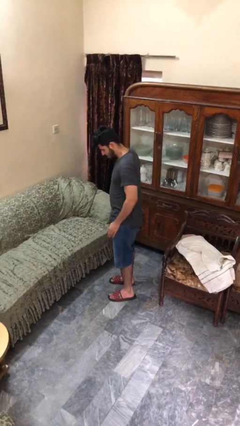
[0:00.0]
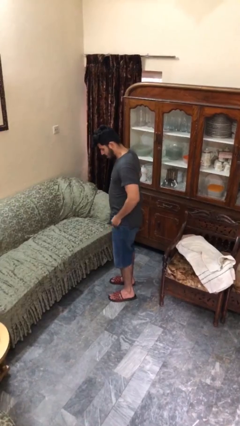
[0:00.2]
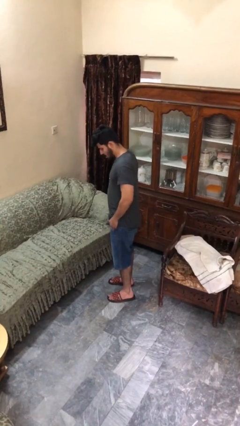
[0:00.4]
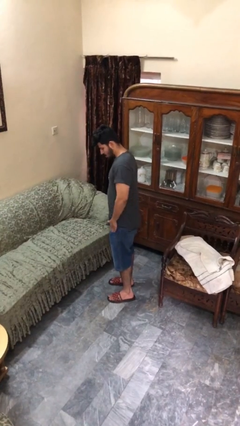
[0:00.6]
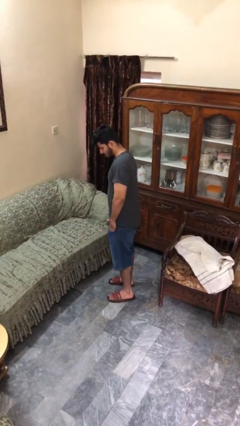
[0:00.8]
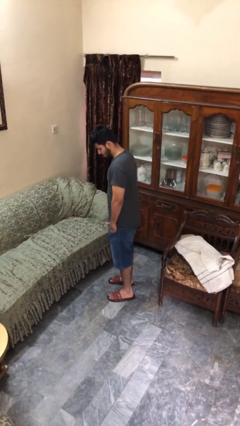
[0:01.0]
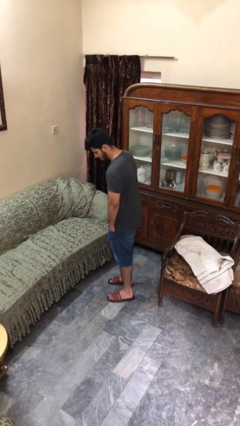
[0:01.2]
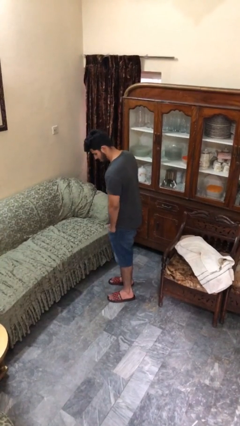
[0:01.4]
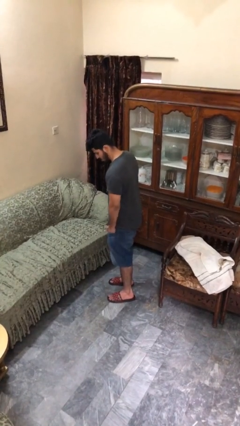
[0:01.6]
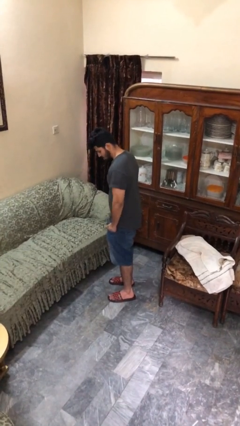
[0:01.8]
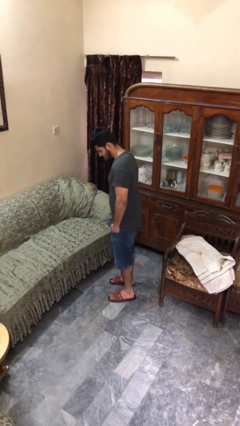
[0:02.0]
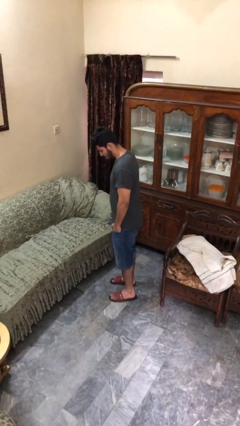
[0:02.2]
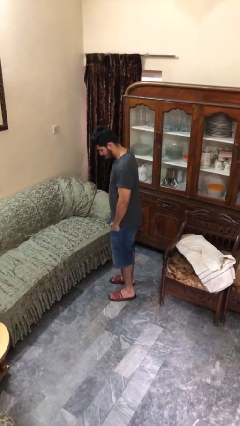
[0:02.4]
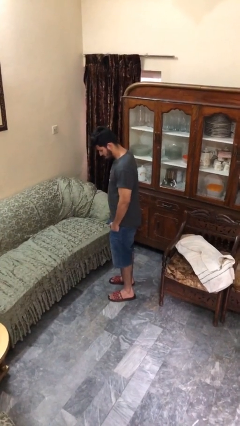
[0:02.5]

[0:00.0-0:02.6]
person puts hands in back pockets

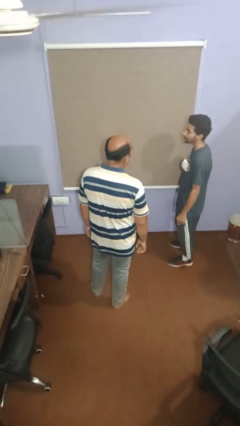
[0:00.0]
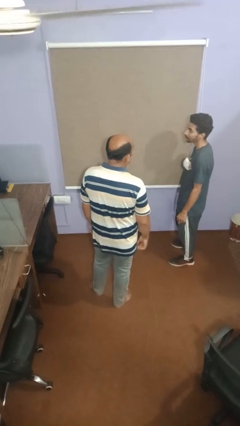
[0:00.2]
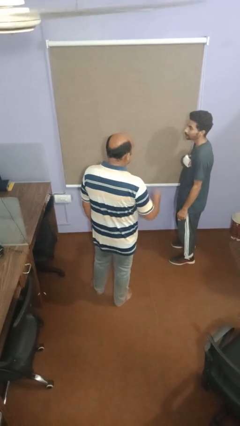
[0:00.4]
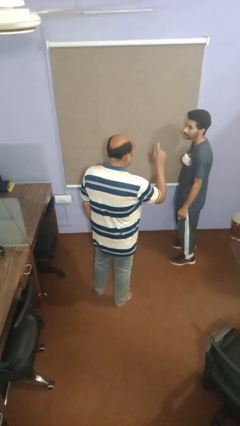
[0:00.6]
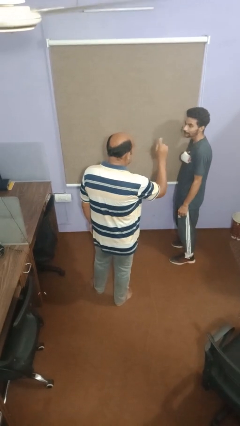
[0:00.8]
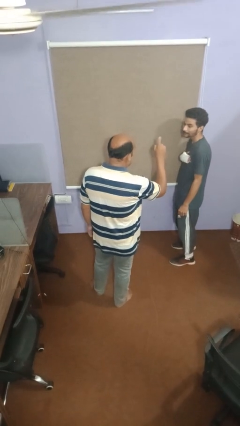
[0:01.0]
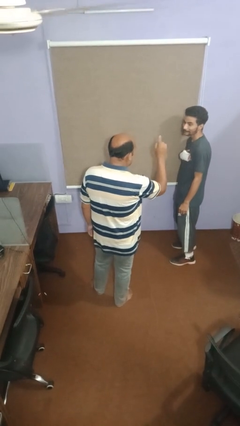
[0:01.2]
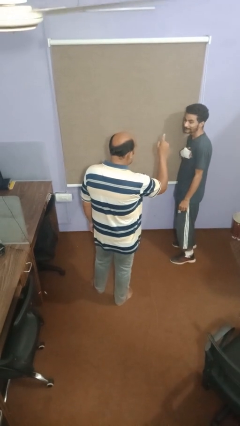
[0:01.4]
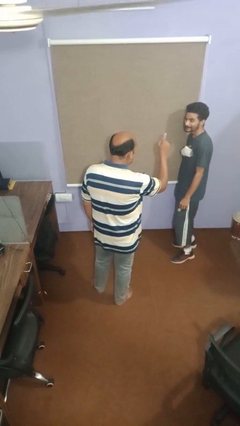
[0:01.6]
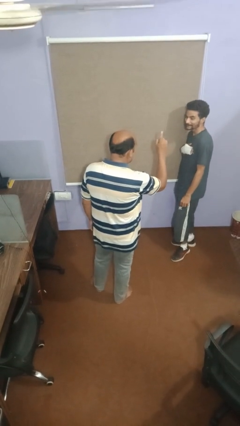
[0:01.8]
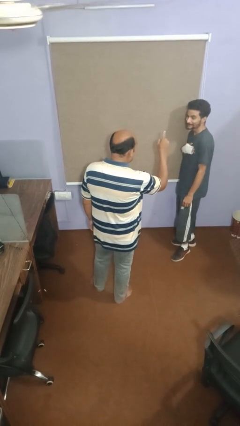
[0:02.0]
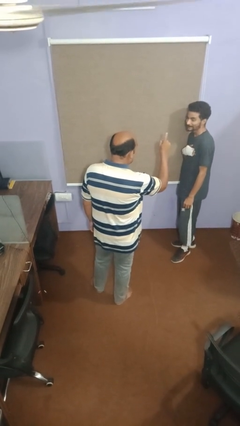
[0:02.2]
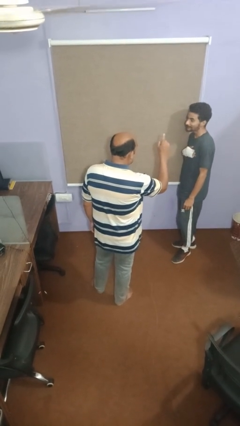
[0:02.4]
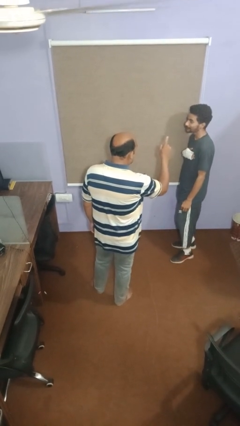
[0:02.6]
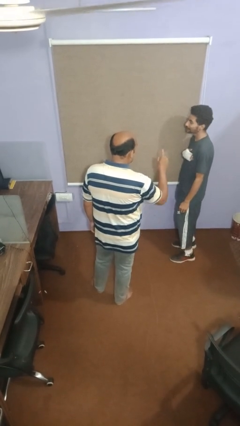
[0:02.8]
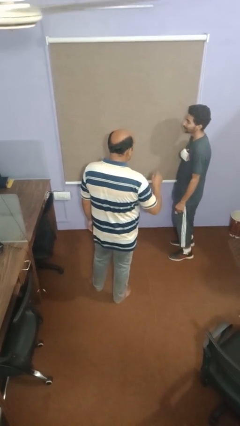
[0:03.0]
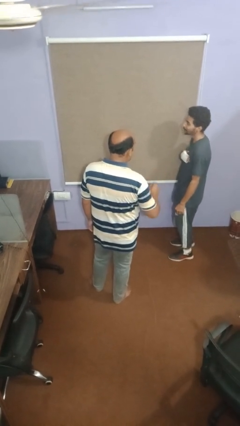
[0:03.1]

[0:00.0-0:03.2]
person points at person

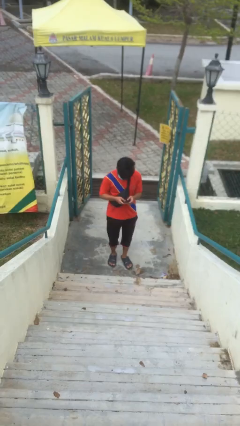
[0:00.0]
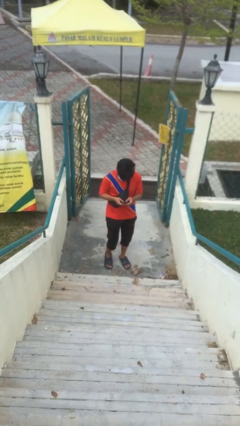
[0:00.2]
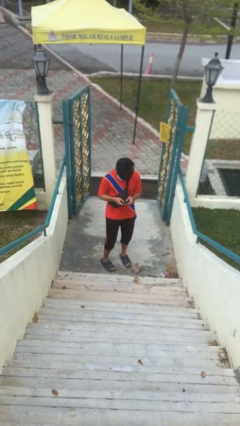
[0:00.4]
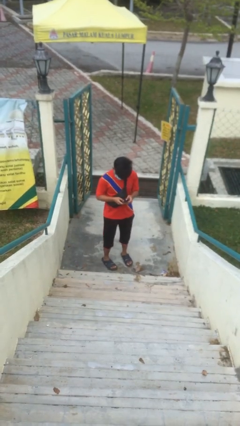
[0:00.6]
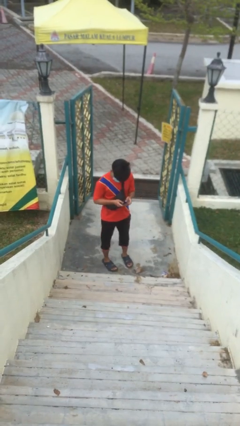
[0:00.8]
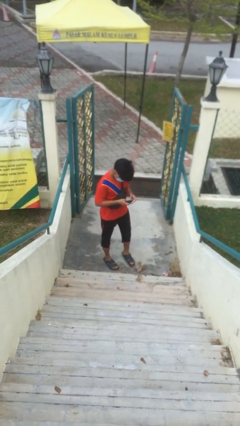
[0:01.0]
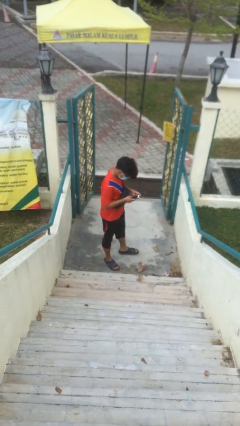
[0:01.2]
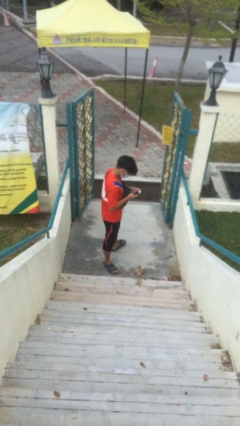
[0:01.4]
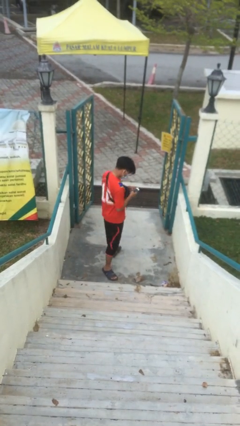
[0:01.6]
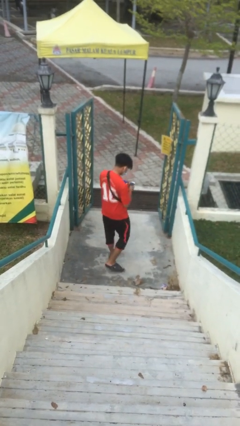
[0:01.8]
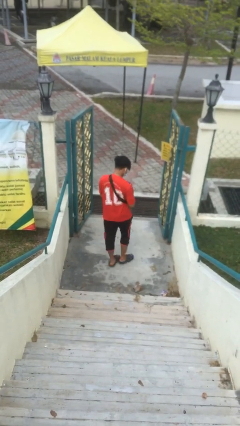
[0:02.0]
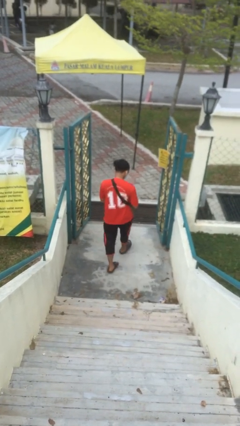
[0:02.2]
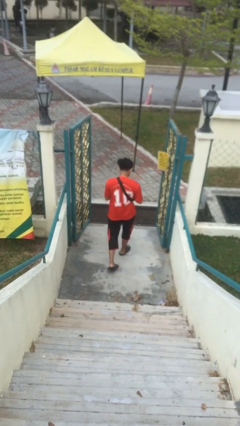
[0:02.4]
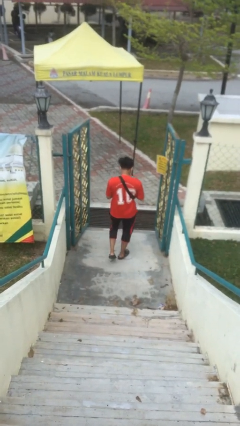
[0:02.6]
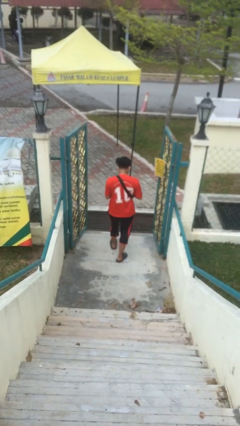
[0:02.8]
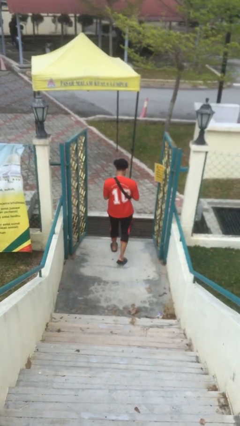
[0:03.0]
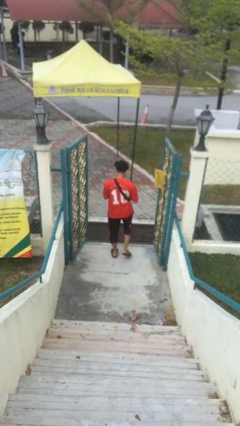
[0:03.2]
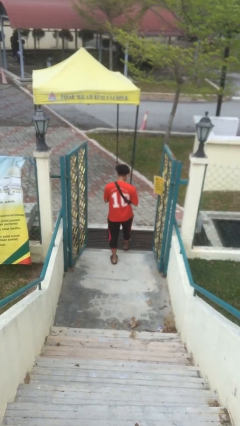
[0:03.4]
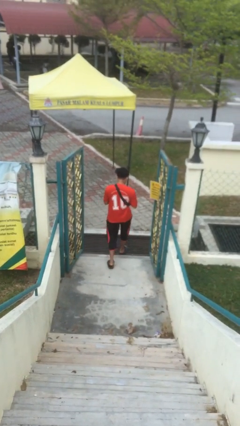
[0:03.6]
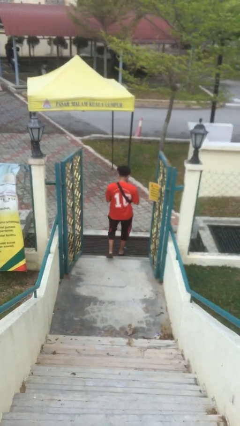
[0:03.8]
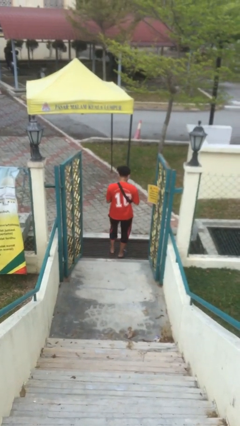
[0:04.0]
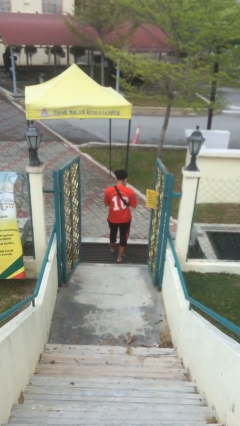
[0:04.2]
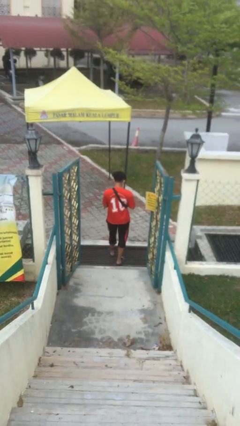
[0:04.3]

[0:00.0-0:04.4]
person exits scene through structure

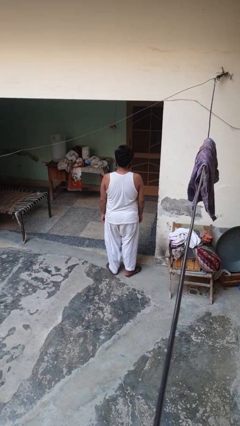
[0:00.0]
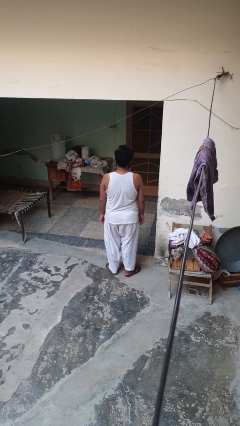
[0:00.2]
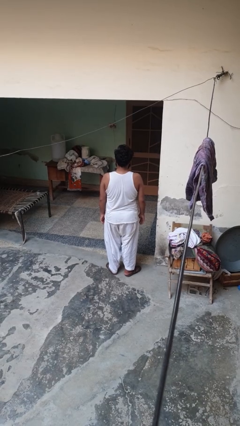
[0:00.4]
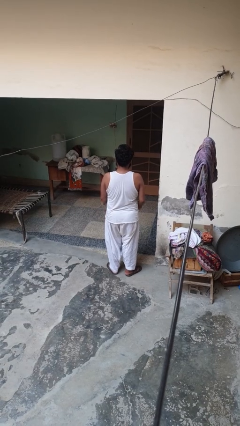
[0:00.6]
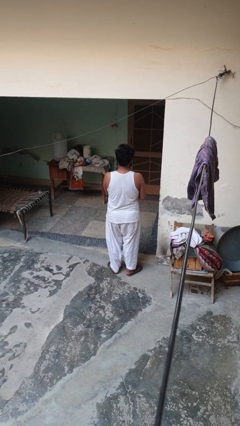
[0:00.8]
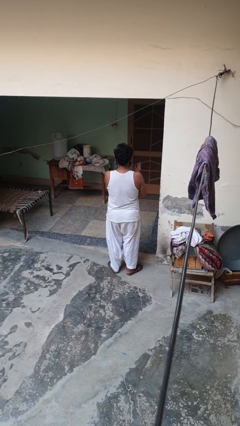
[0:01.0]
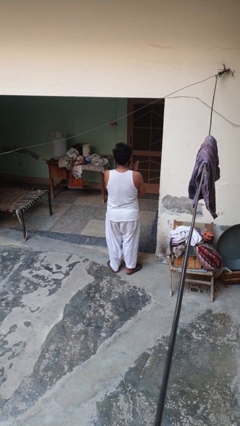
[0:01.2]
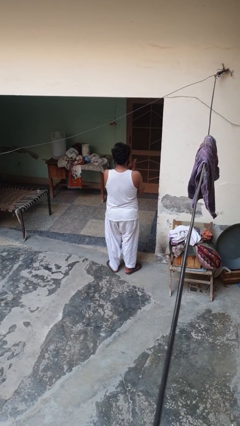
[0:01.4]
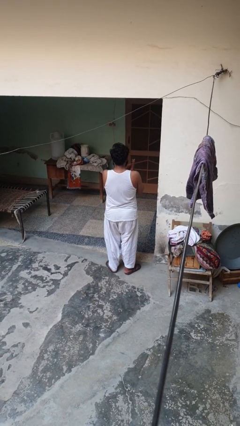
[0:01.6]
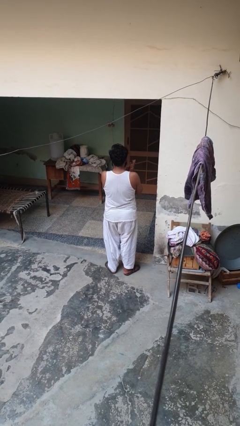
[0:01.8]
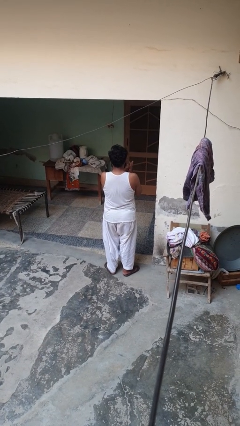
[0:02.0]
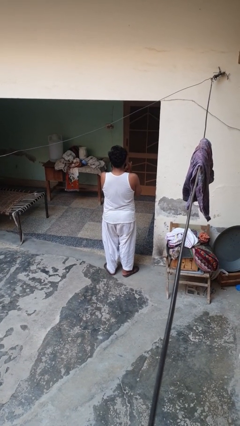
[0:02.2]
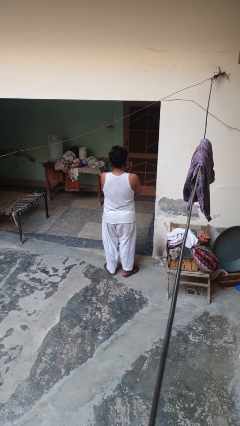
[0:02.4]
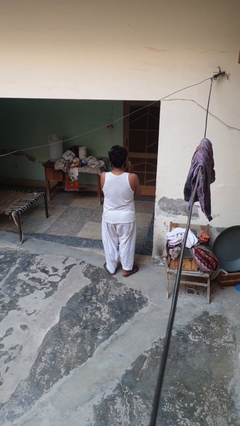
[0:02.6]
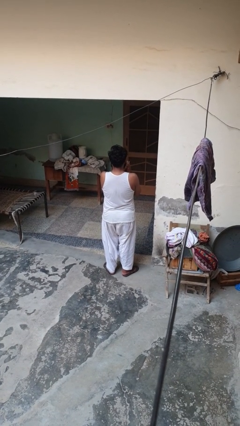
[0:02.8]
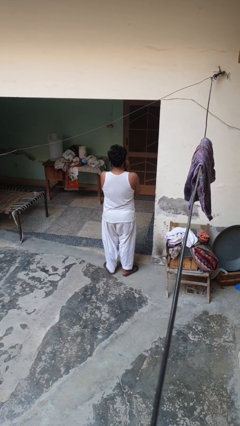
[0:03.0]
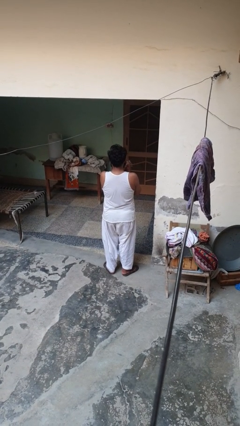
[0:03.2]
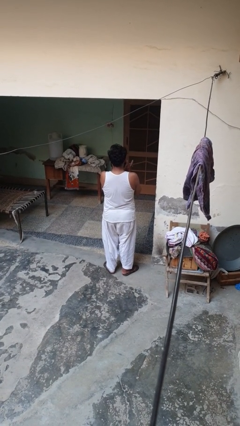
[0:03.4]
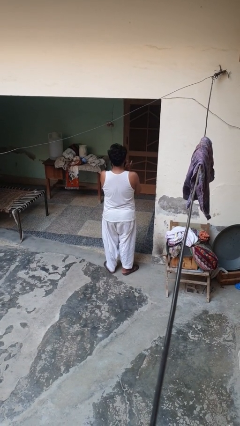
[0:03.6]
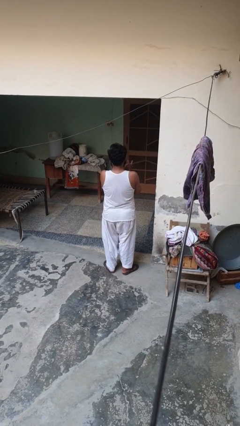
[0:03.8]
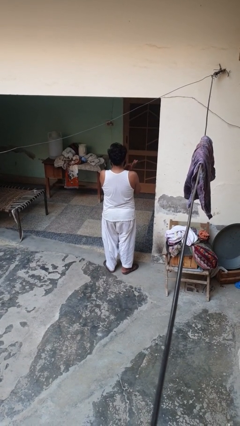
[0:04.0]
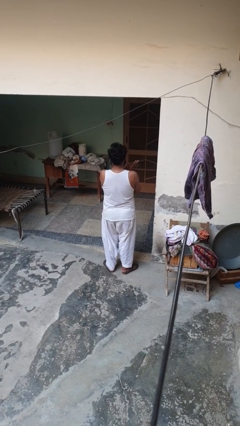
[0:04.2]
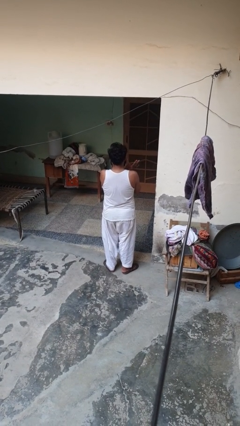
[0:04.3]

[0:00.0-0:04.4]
person snaps fingers

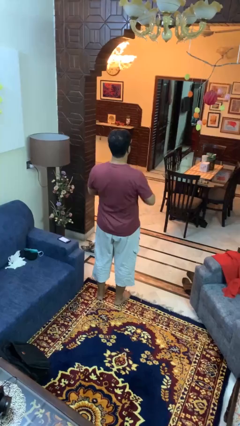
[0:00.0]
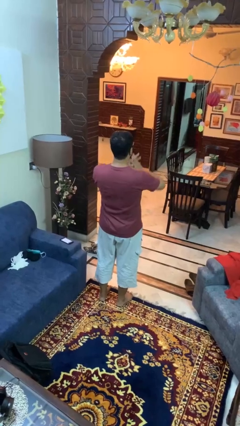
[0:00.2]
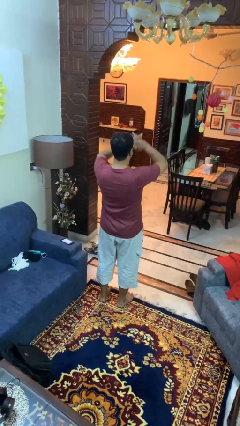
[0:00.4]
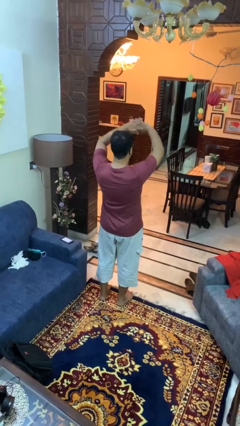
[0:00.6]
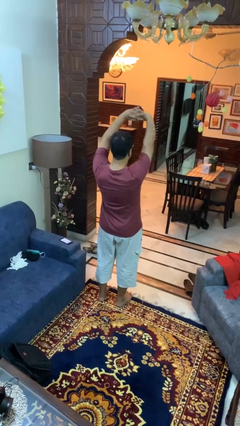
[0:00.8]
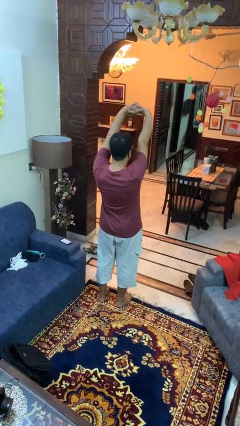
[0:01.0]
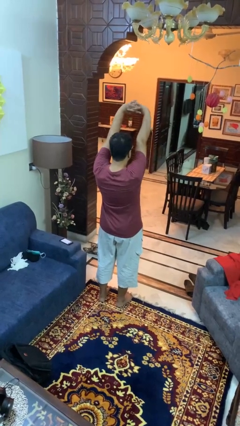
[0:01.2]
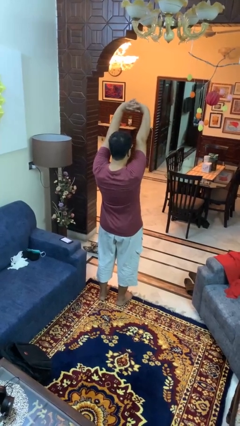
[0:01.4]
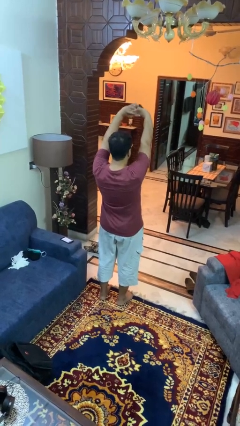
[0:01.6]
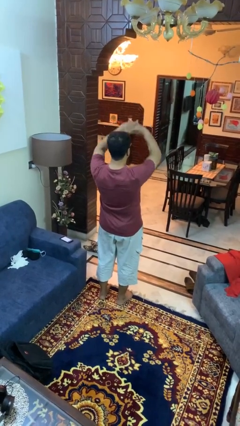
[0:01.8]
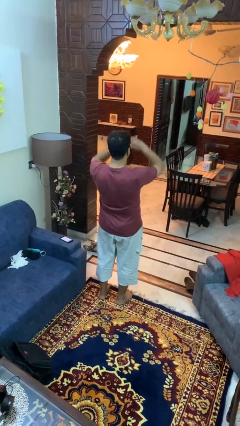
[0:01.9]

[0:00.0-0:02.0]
person stretches arms over head

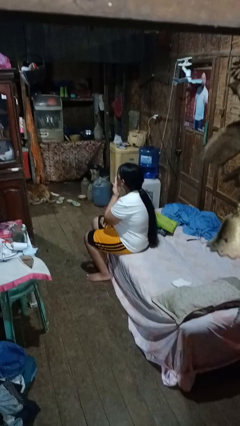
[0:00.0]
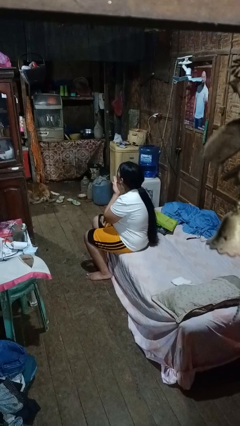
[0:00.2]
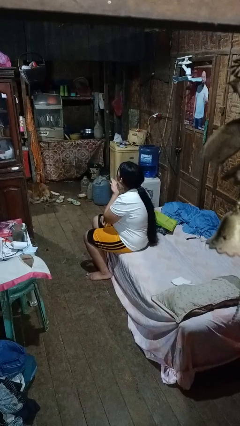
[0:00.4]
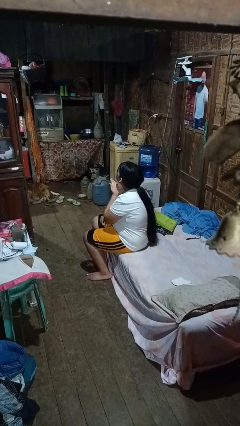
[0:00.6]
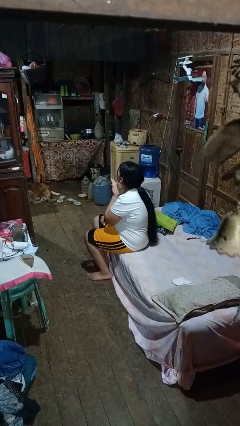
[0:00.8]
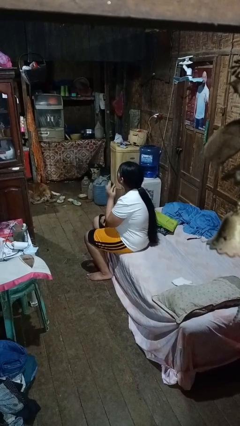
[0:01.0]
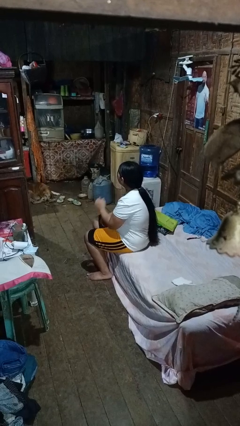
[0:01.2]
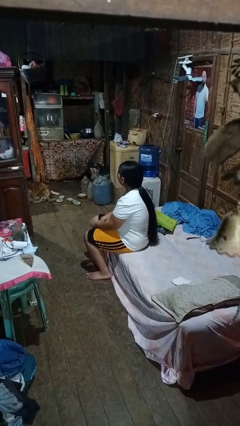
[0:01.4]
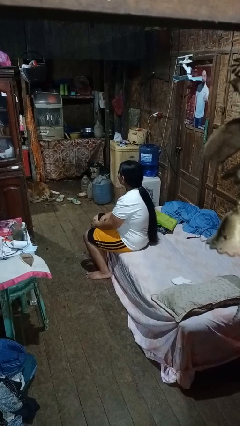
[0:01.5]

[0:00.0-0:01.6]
person gestures blow kiss
